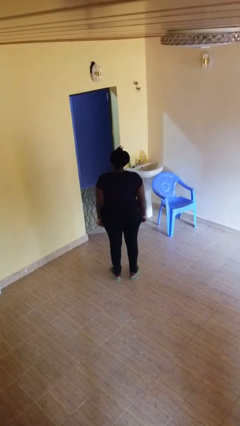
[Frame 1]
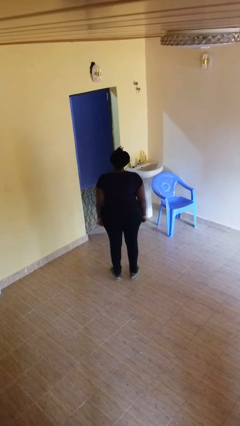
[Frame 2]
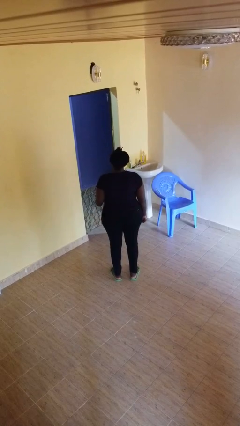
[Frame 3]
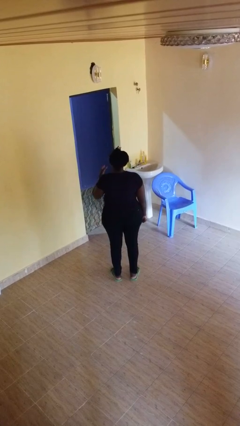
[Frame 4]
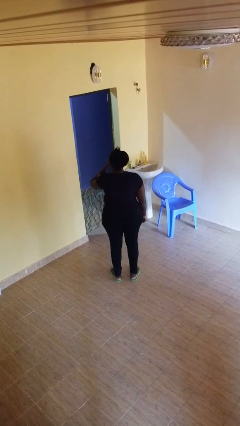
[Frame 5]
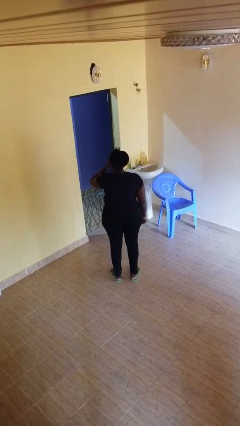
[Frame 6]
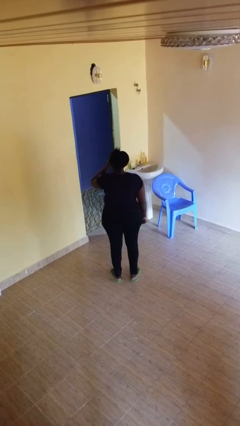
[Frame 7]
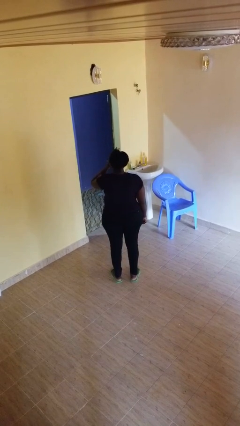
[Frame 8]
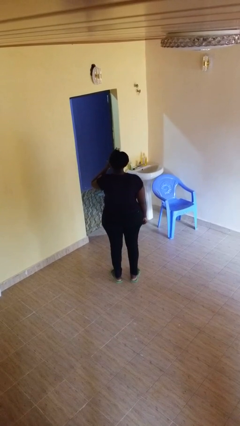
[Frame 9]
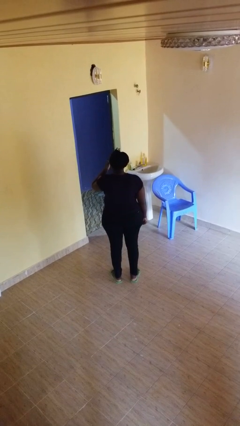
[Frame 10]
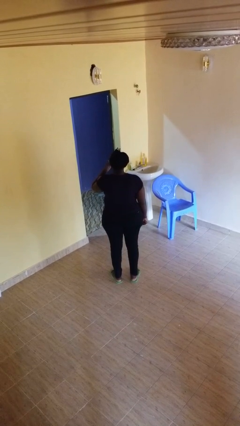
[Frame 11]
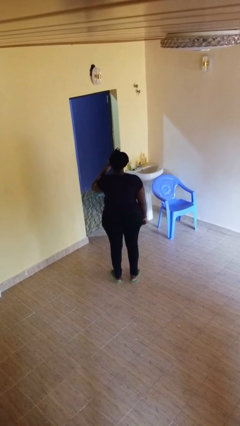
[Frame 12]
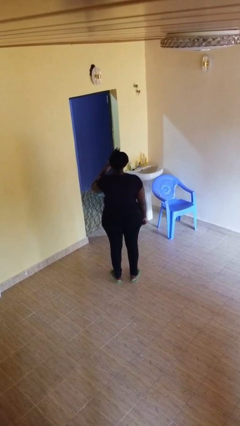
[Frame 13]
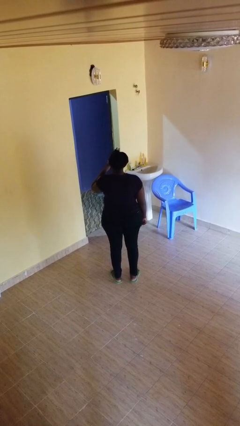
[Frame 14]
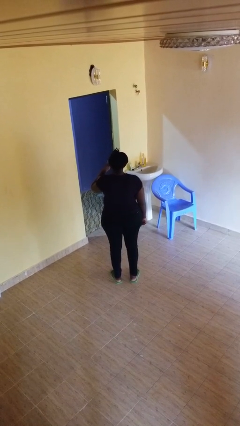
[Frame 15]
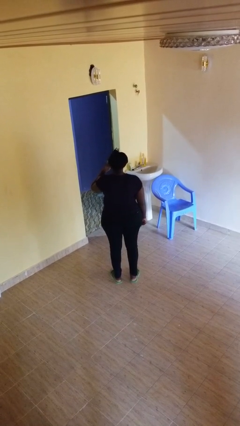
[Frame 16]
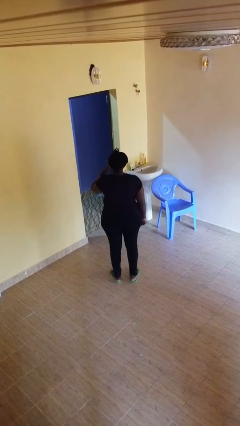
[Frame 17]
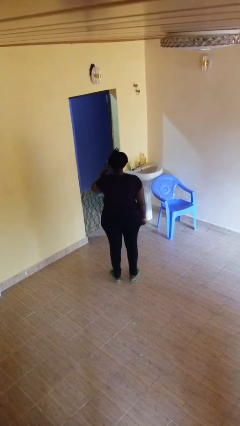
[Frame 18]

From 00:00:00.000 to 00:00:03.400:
person licks fingers

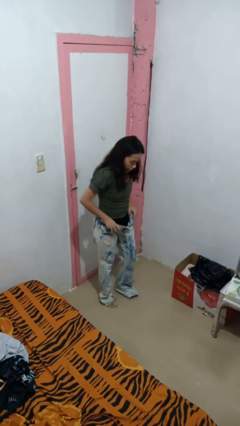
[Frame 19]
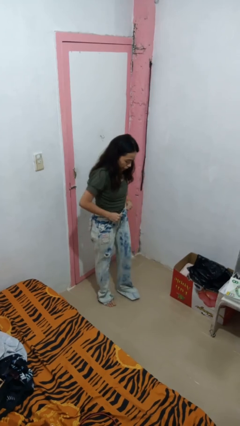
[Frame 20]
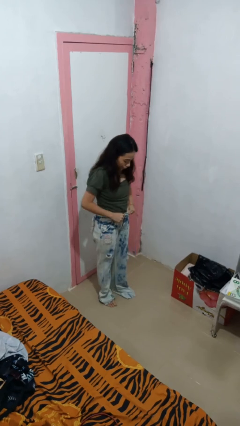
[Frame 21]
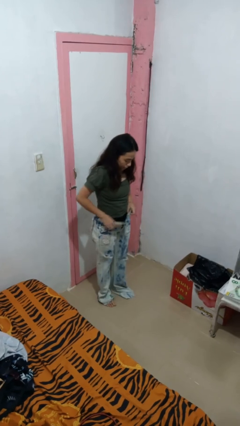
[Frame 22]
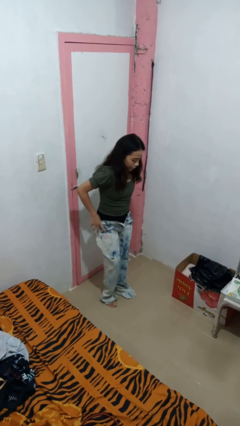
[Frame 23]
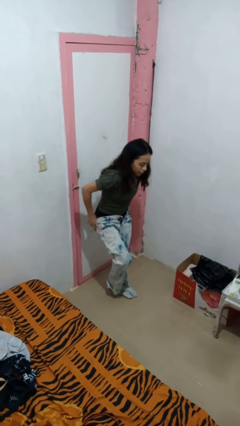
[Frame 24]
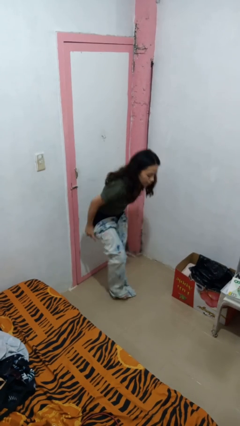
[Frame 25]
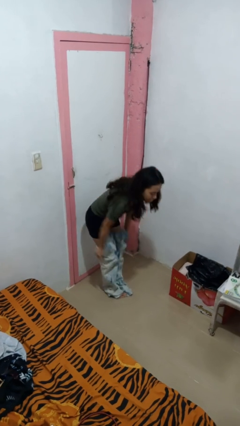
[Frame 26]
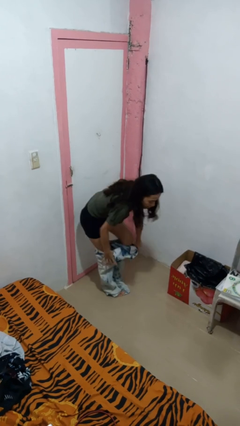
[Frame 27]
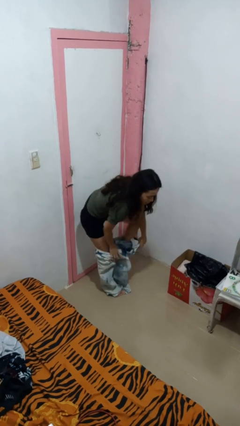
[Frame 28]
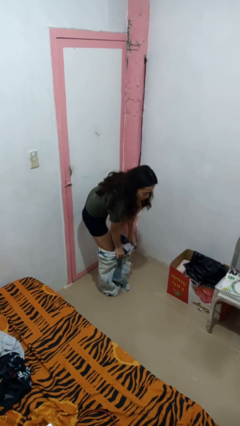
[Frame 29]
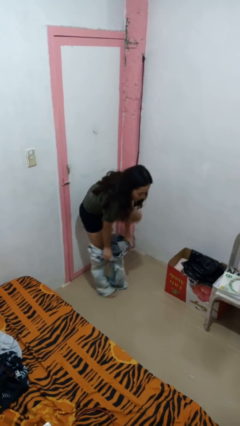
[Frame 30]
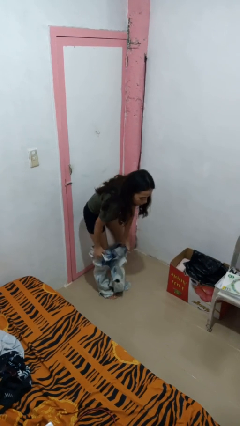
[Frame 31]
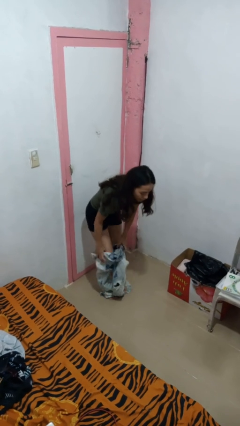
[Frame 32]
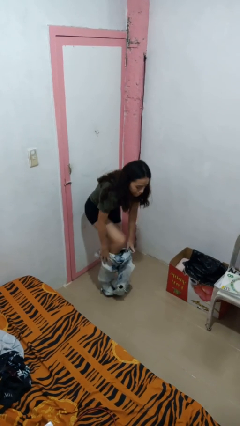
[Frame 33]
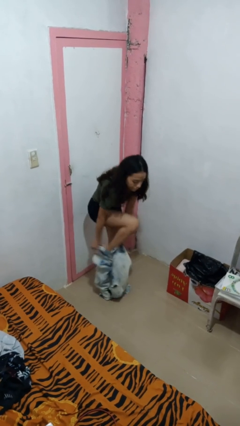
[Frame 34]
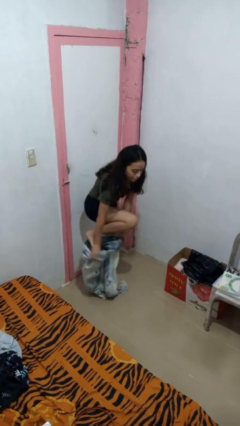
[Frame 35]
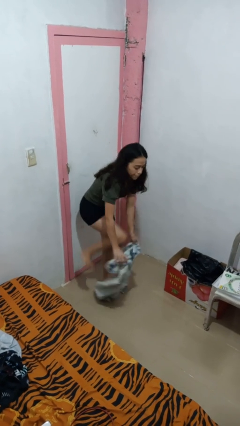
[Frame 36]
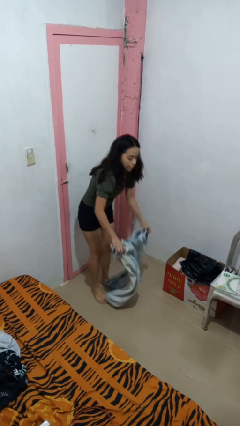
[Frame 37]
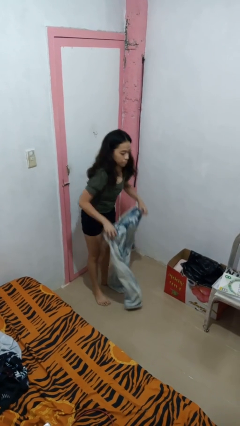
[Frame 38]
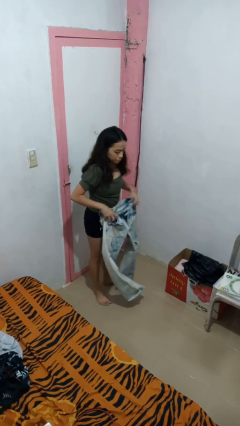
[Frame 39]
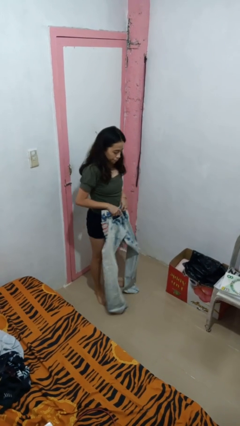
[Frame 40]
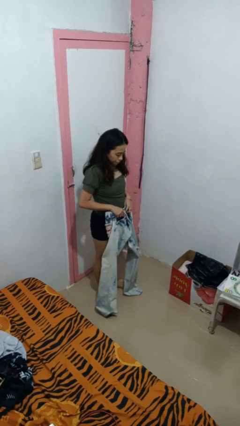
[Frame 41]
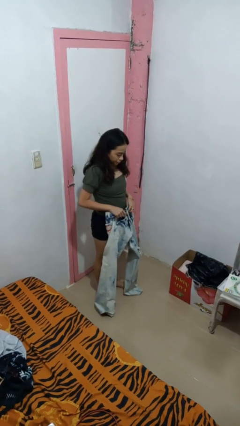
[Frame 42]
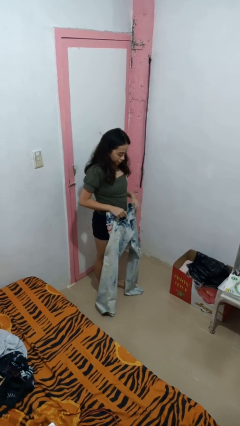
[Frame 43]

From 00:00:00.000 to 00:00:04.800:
person takes off pants

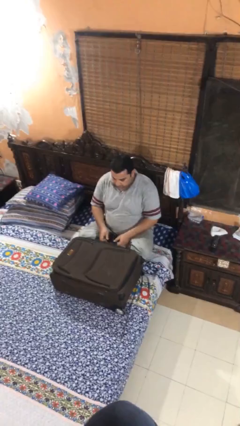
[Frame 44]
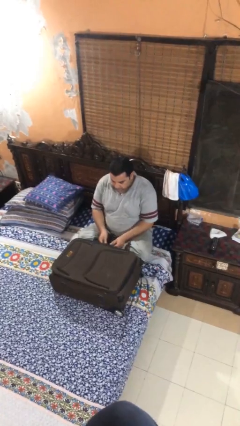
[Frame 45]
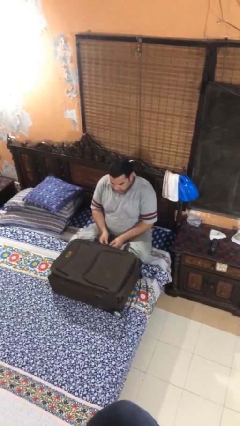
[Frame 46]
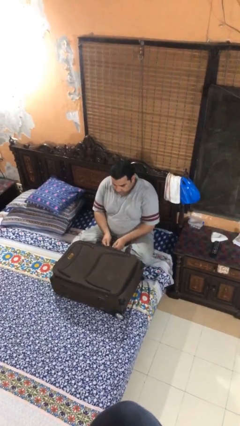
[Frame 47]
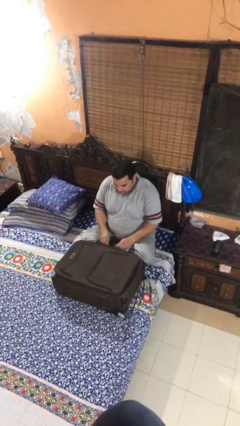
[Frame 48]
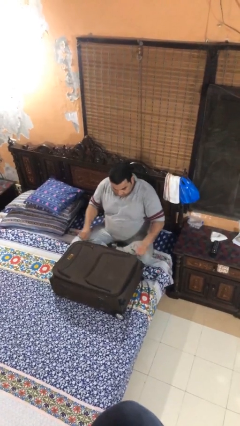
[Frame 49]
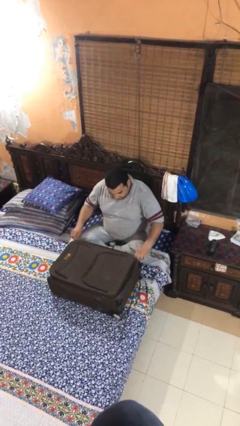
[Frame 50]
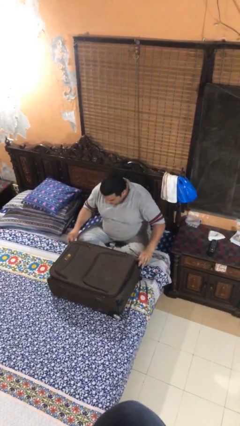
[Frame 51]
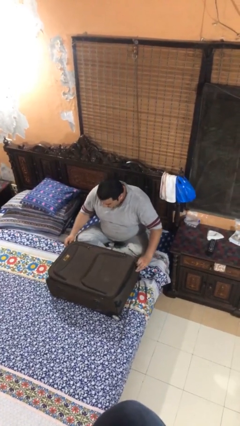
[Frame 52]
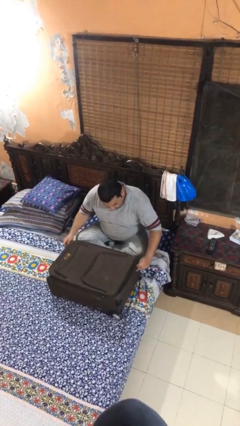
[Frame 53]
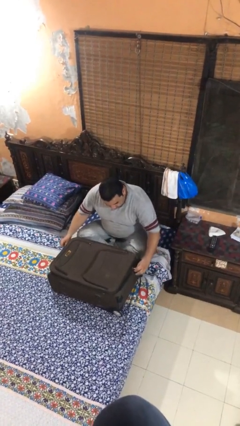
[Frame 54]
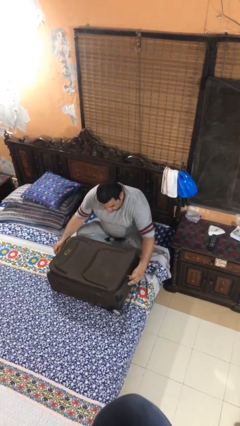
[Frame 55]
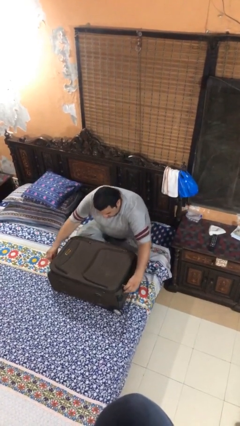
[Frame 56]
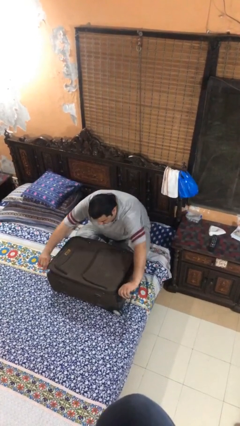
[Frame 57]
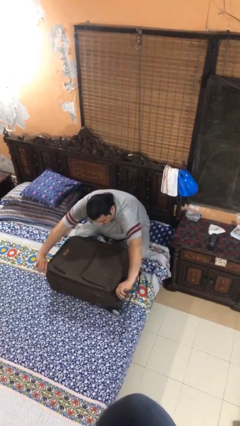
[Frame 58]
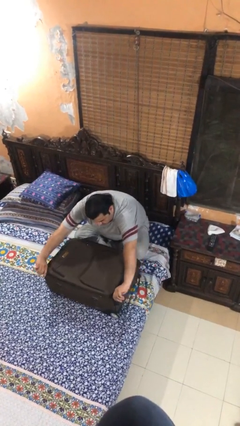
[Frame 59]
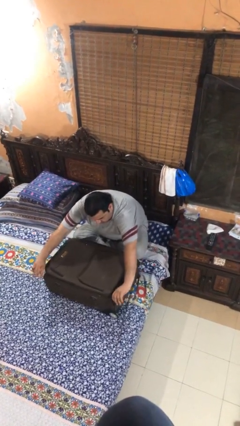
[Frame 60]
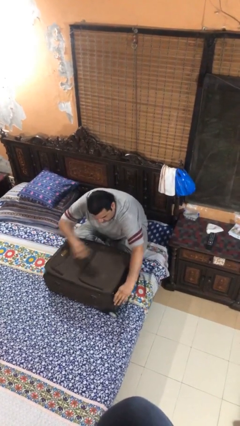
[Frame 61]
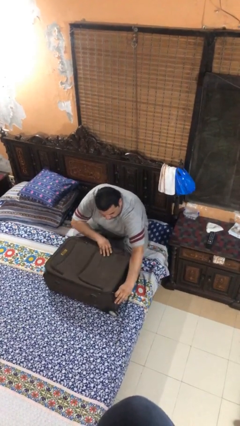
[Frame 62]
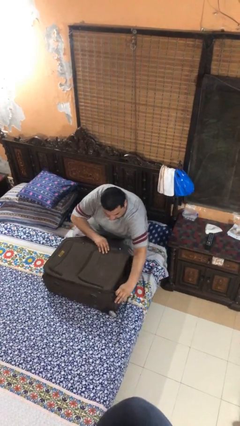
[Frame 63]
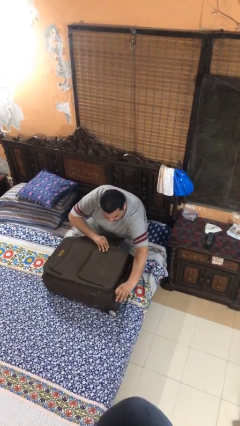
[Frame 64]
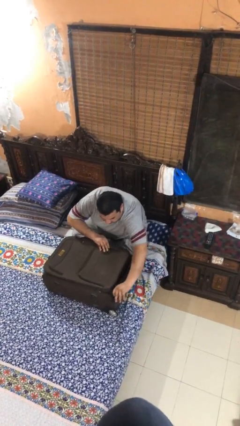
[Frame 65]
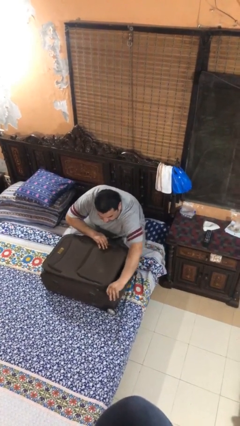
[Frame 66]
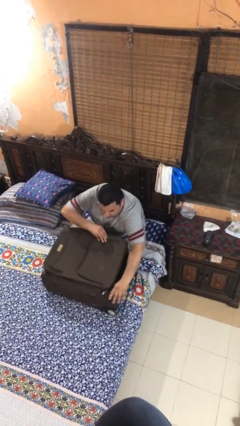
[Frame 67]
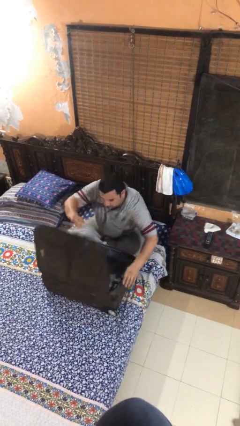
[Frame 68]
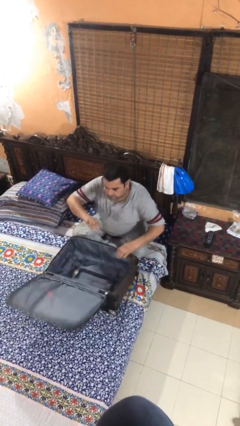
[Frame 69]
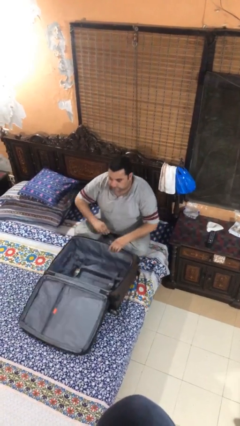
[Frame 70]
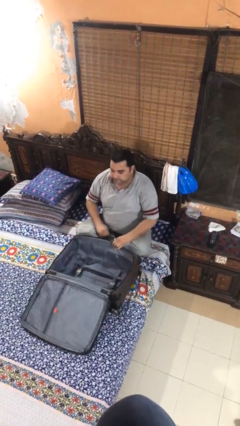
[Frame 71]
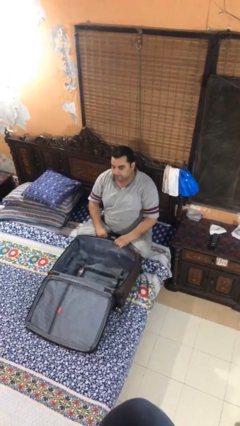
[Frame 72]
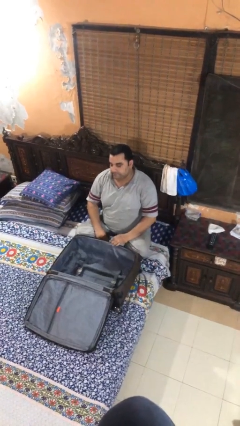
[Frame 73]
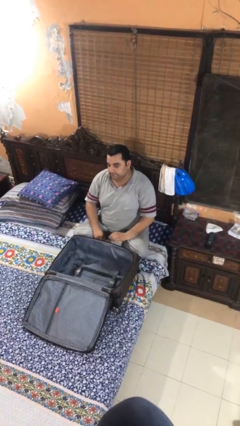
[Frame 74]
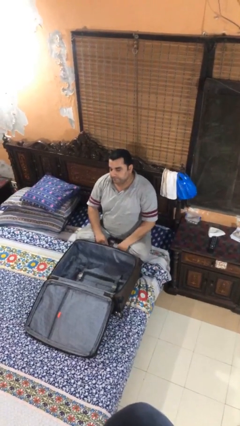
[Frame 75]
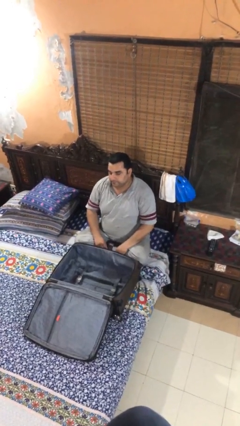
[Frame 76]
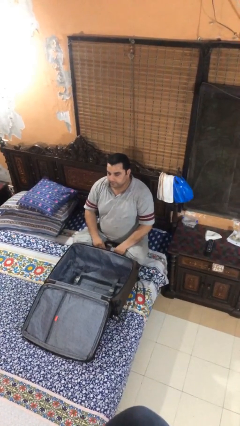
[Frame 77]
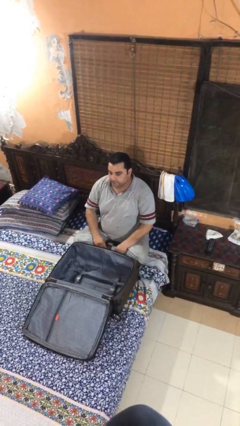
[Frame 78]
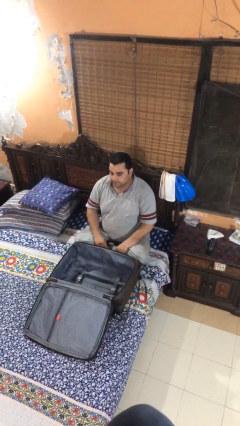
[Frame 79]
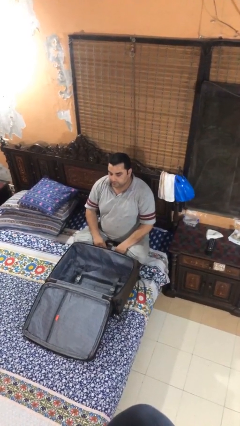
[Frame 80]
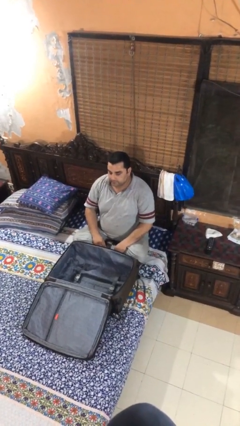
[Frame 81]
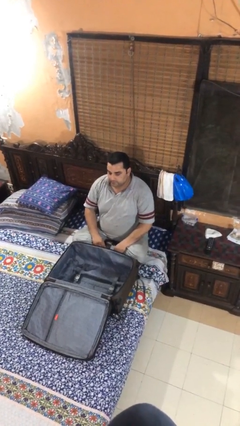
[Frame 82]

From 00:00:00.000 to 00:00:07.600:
person opens suitcase

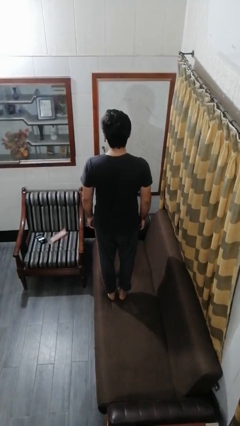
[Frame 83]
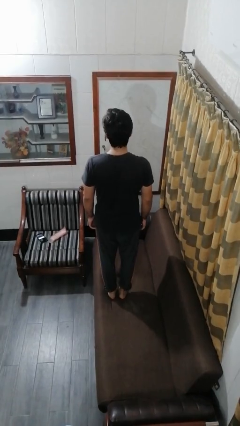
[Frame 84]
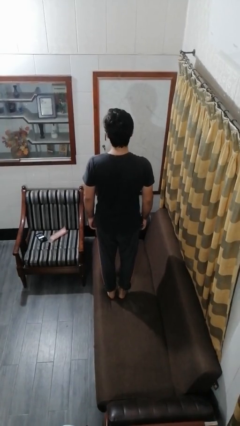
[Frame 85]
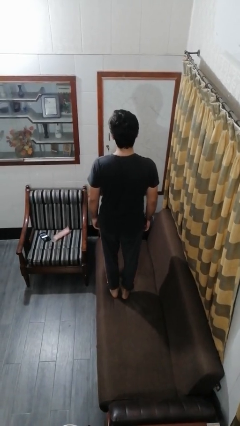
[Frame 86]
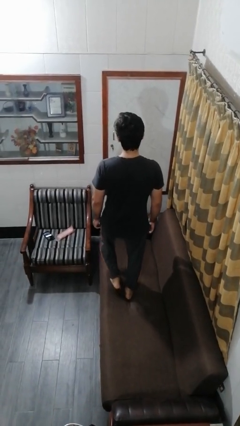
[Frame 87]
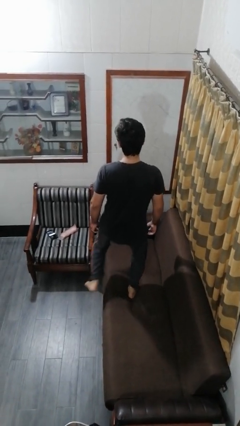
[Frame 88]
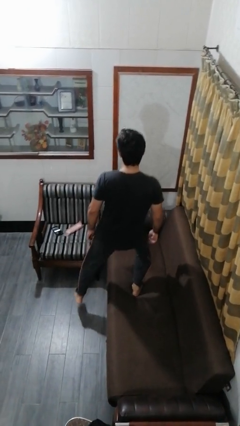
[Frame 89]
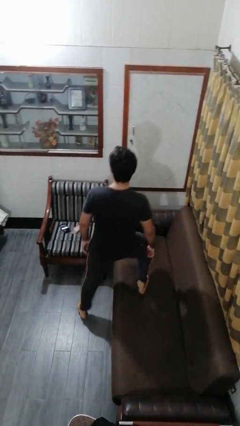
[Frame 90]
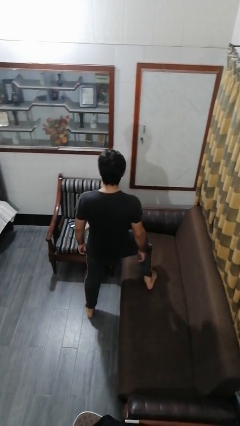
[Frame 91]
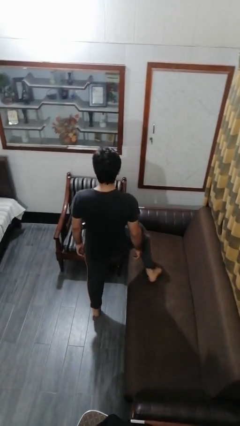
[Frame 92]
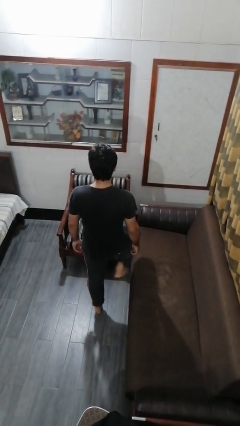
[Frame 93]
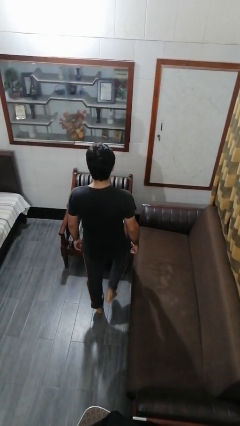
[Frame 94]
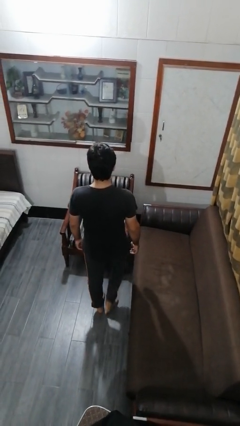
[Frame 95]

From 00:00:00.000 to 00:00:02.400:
person climbs off couch
